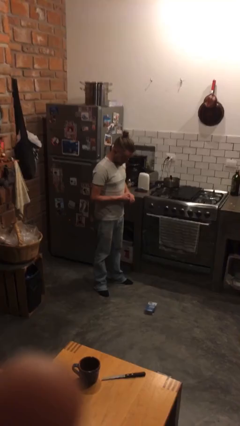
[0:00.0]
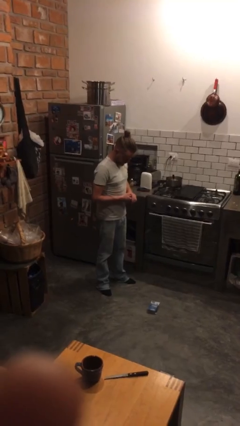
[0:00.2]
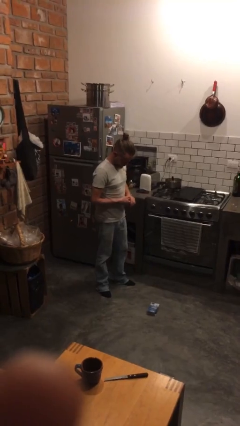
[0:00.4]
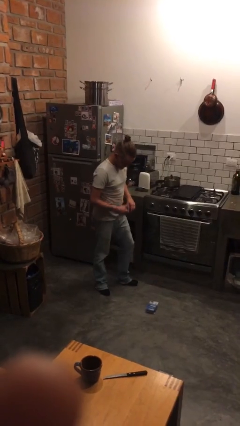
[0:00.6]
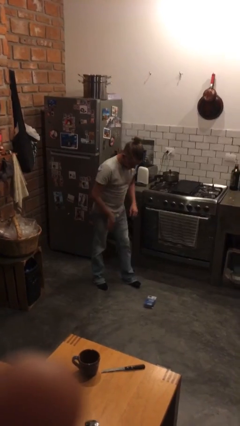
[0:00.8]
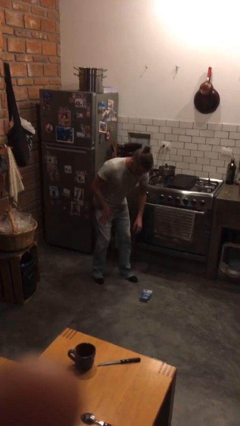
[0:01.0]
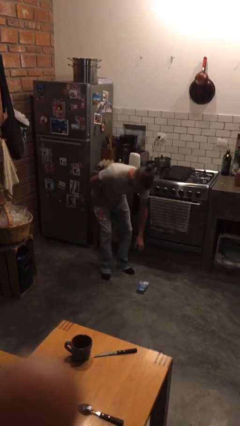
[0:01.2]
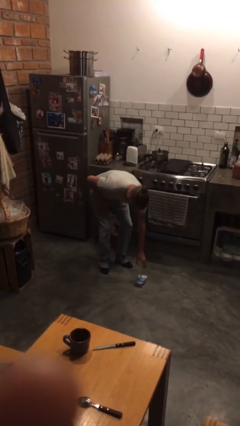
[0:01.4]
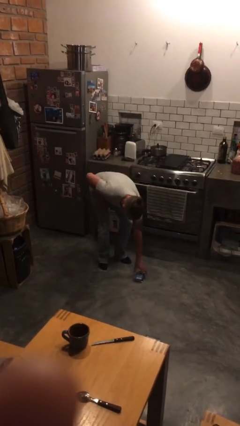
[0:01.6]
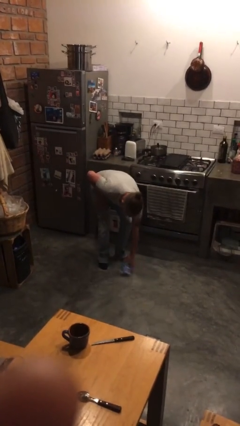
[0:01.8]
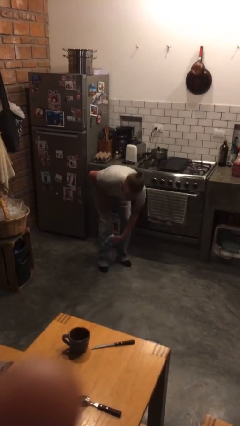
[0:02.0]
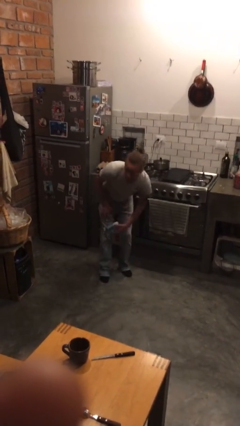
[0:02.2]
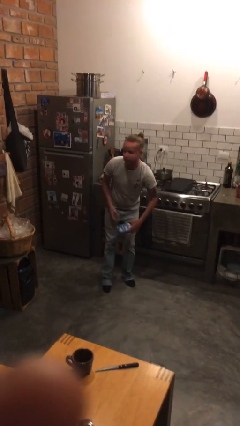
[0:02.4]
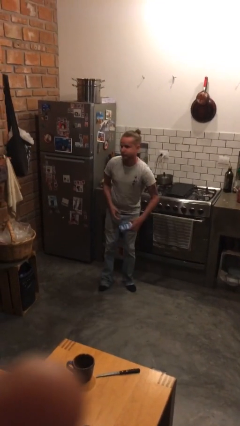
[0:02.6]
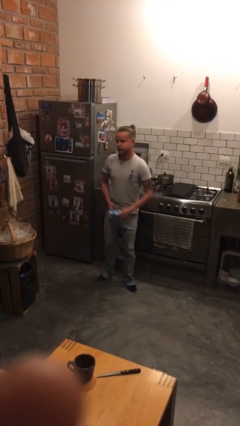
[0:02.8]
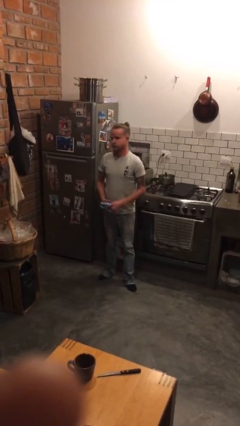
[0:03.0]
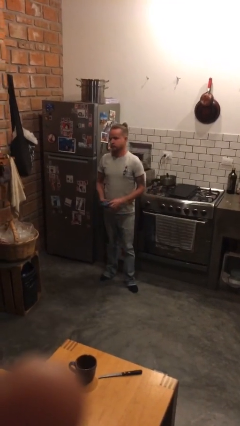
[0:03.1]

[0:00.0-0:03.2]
person picks up object from floor

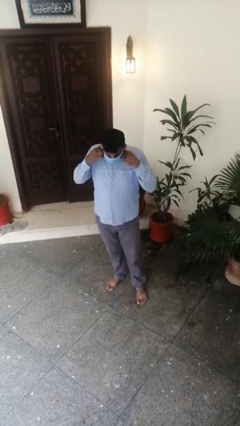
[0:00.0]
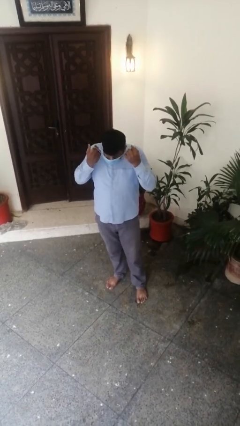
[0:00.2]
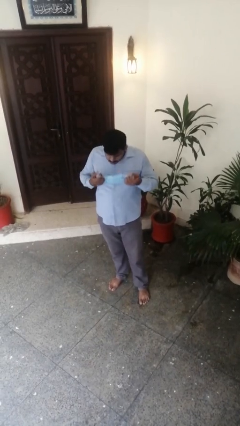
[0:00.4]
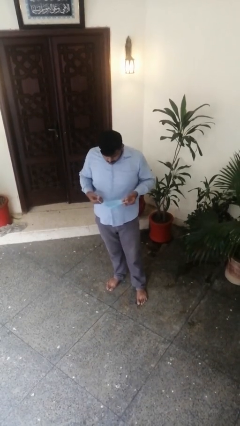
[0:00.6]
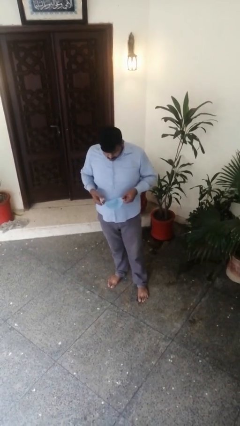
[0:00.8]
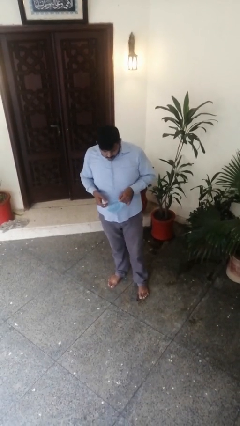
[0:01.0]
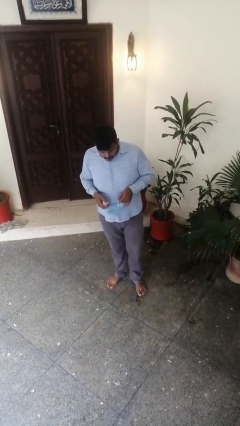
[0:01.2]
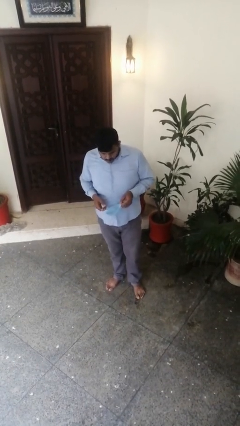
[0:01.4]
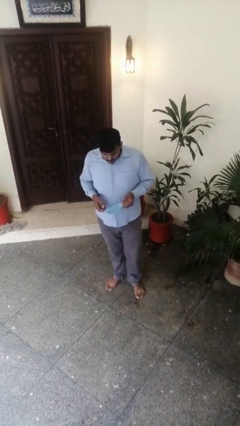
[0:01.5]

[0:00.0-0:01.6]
person takes off facemask

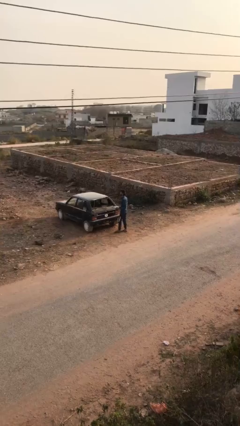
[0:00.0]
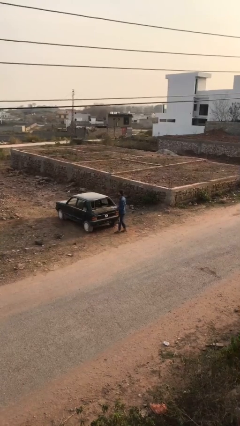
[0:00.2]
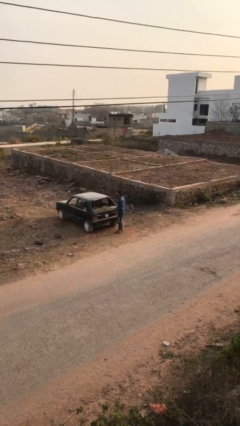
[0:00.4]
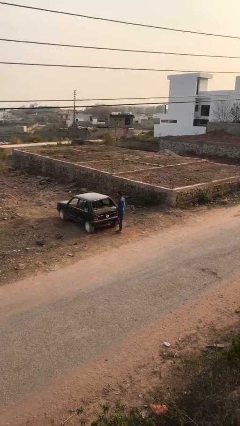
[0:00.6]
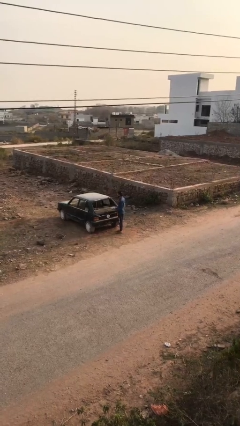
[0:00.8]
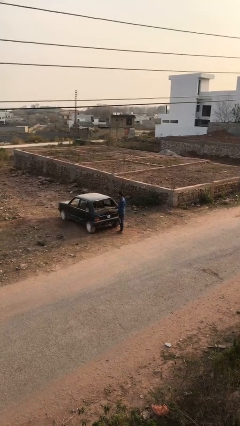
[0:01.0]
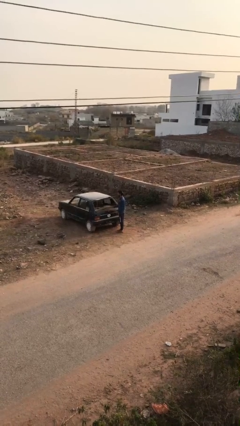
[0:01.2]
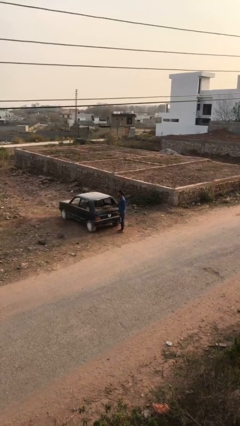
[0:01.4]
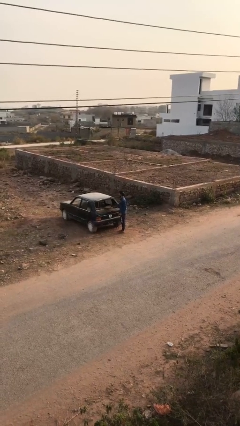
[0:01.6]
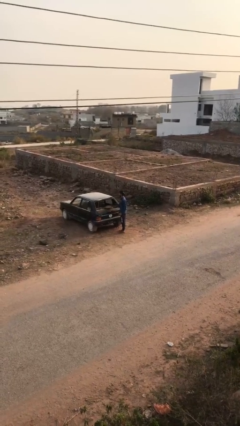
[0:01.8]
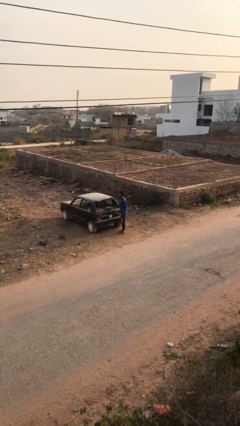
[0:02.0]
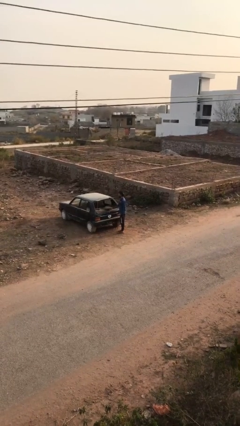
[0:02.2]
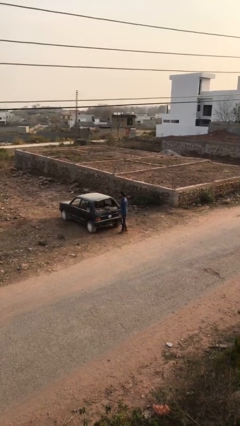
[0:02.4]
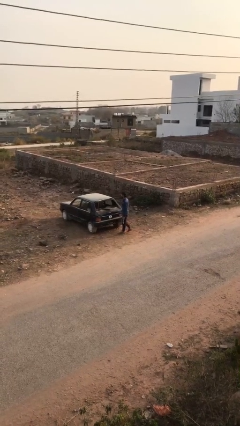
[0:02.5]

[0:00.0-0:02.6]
person loads car

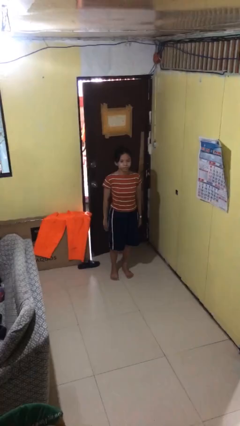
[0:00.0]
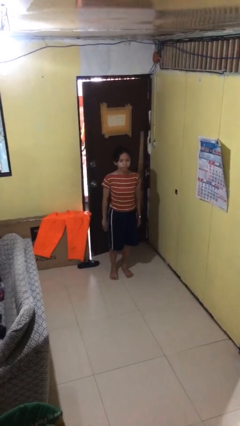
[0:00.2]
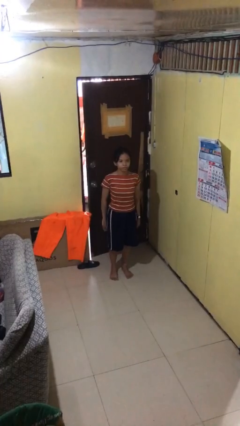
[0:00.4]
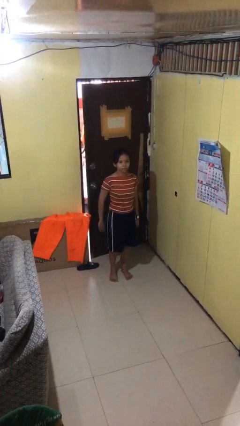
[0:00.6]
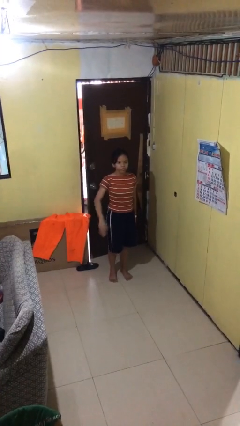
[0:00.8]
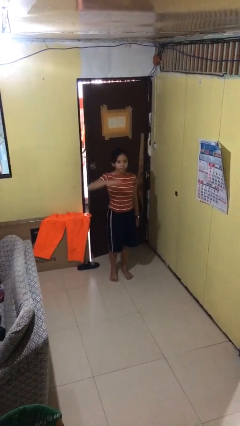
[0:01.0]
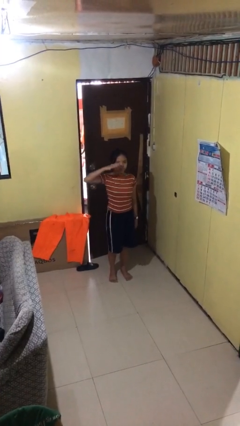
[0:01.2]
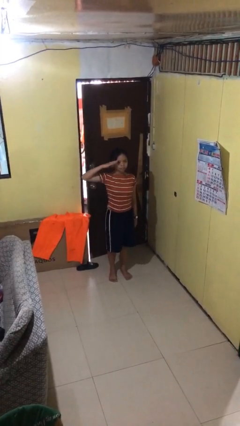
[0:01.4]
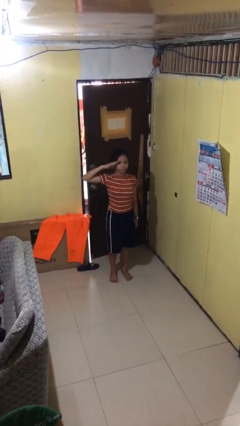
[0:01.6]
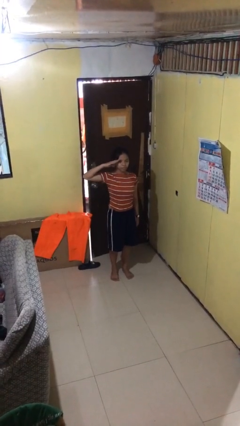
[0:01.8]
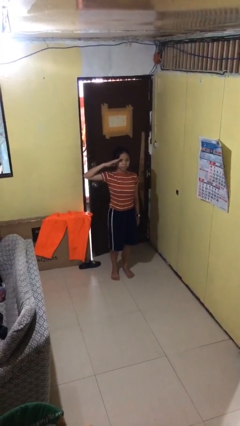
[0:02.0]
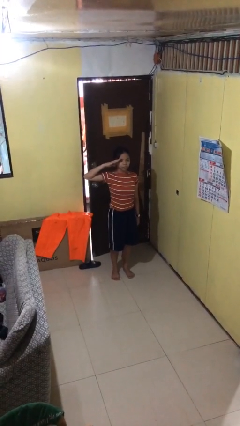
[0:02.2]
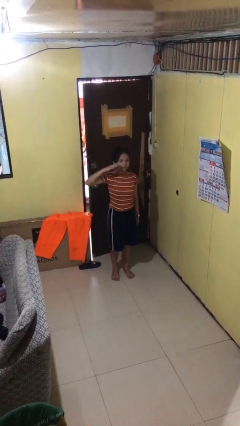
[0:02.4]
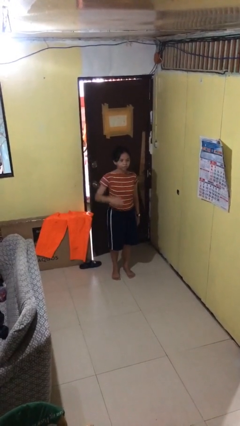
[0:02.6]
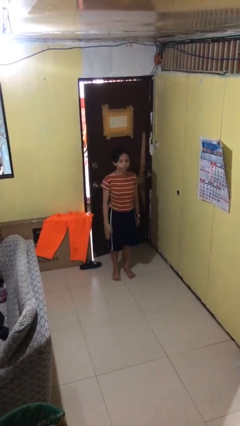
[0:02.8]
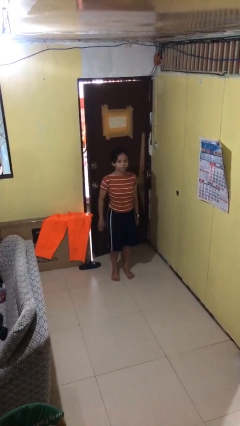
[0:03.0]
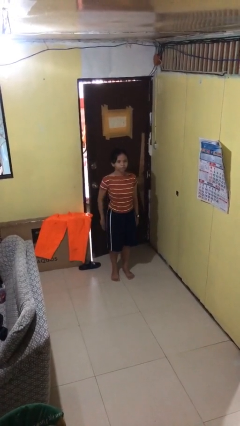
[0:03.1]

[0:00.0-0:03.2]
person salutes

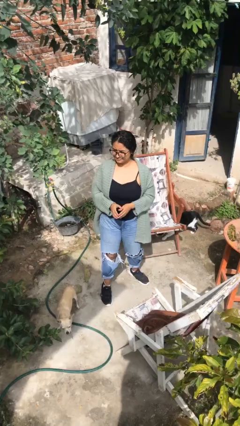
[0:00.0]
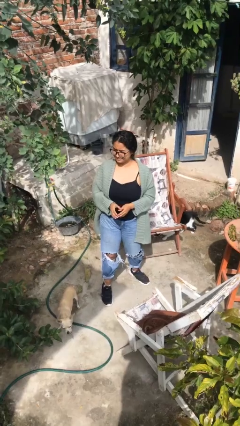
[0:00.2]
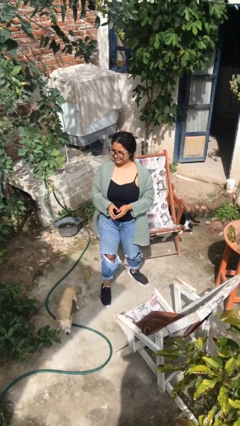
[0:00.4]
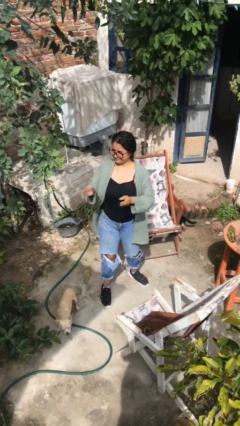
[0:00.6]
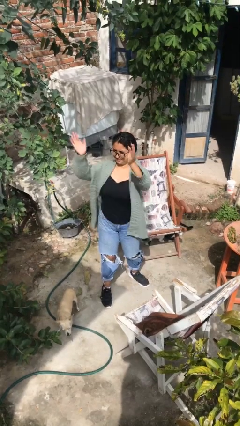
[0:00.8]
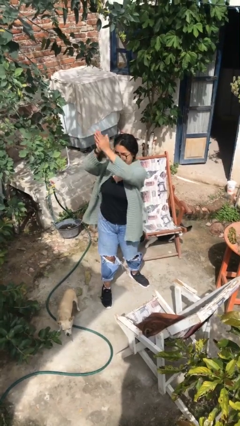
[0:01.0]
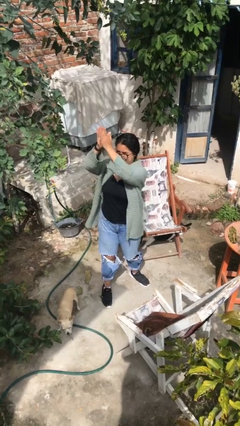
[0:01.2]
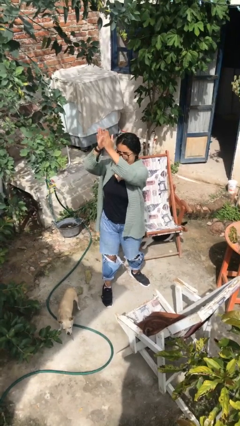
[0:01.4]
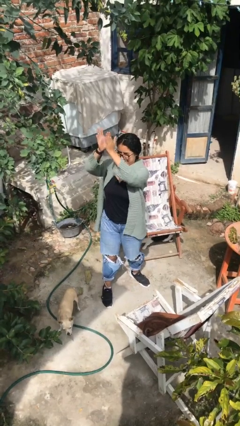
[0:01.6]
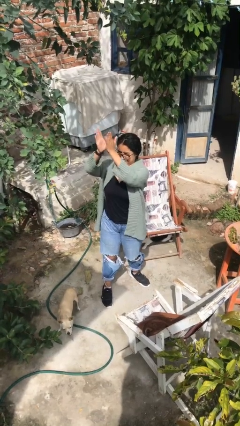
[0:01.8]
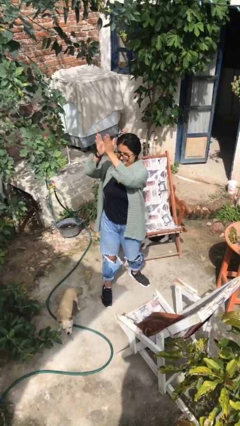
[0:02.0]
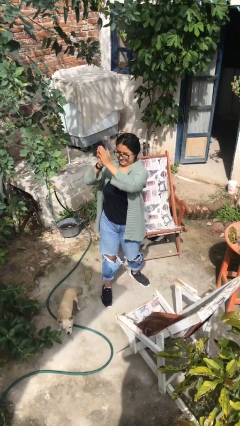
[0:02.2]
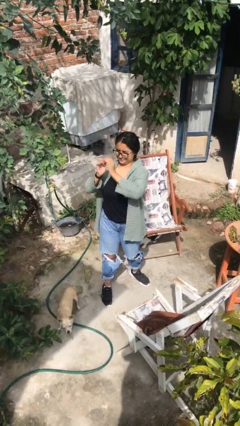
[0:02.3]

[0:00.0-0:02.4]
person claps hands

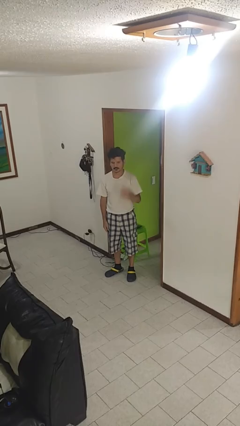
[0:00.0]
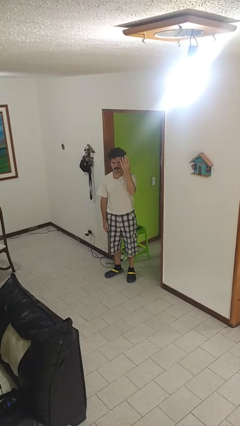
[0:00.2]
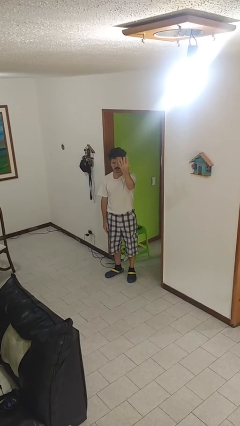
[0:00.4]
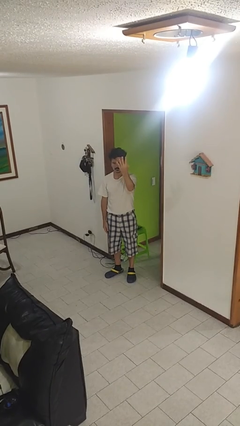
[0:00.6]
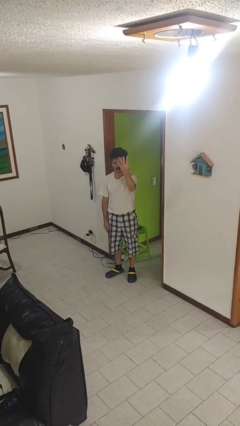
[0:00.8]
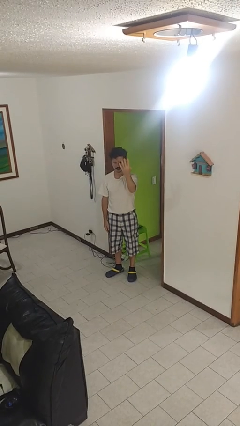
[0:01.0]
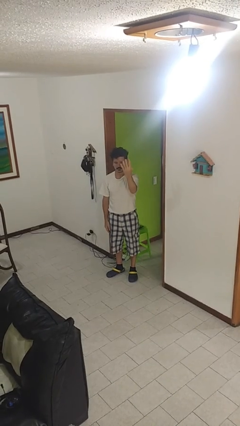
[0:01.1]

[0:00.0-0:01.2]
person gestures number four

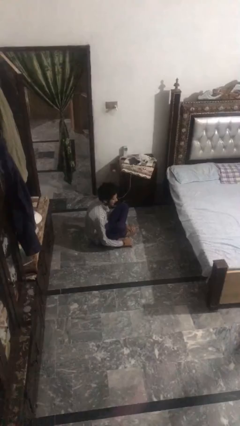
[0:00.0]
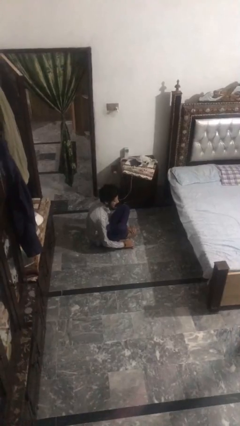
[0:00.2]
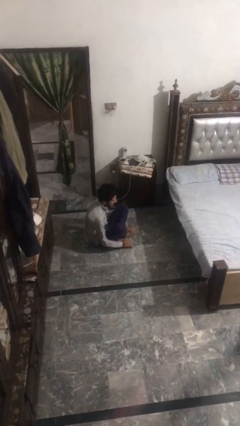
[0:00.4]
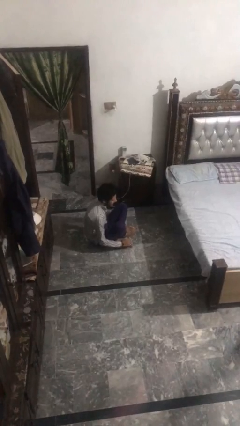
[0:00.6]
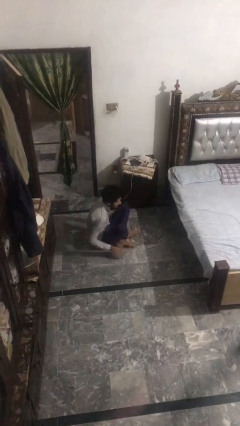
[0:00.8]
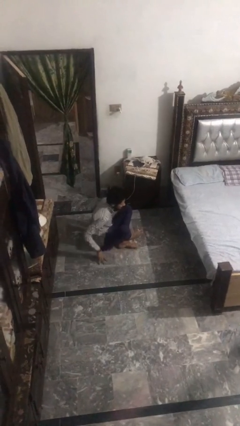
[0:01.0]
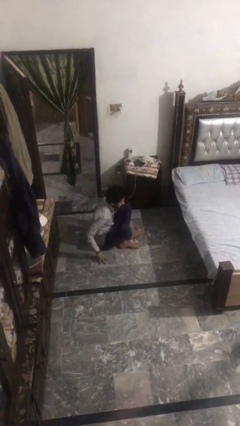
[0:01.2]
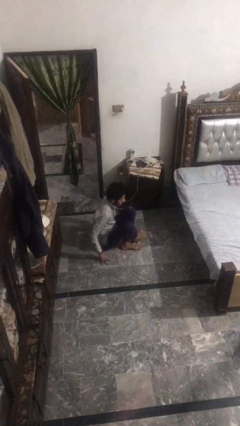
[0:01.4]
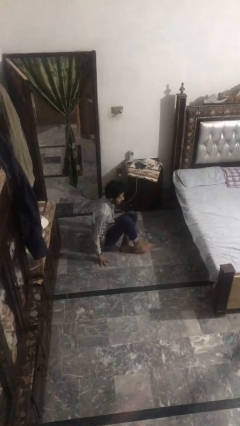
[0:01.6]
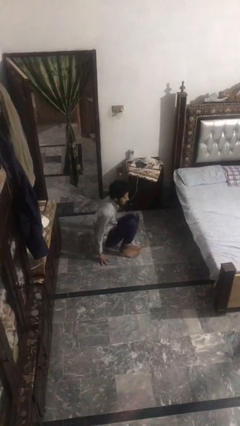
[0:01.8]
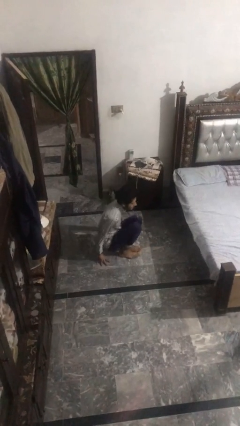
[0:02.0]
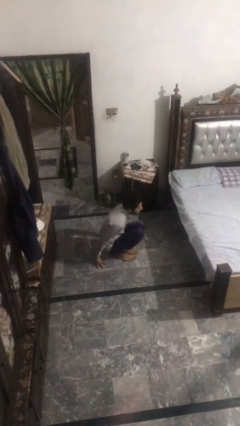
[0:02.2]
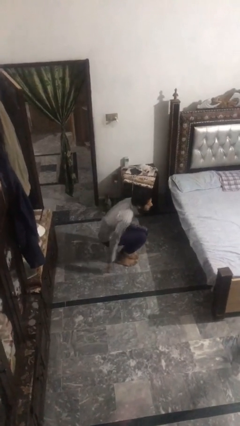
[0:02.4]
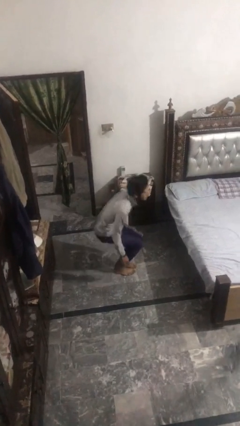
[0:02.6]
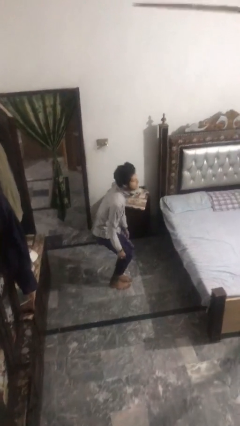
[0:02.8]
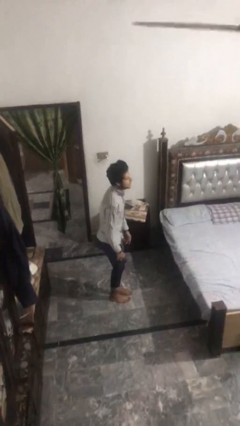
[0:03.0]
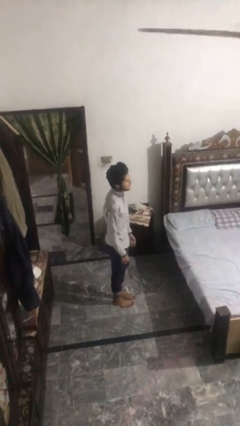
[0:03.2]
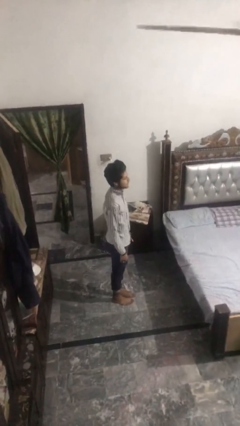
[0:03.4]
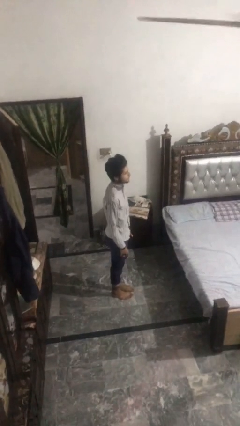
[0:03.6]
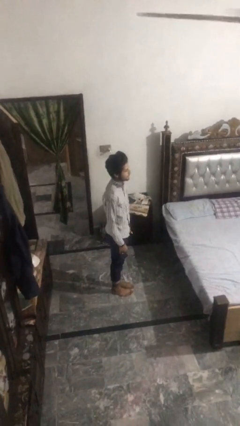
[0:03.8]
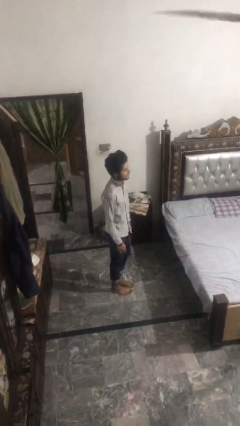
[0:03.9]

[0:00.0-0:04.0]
person stands up from floor
